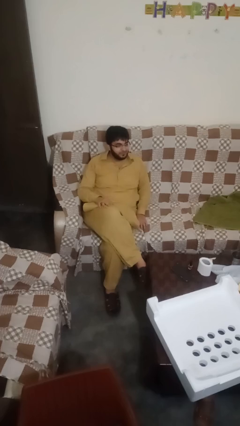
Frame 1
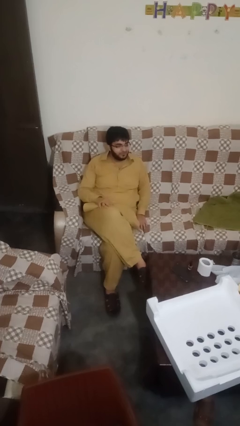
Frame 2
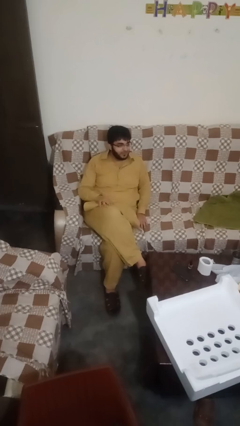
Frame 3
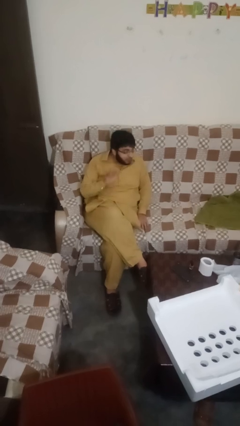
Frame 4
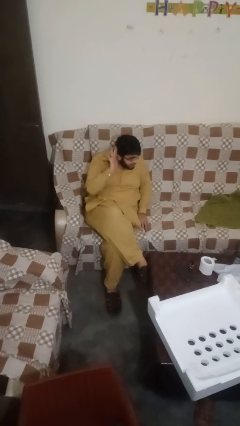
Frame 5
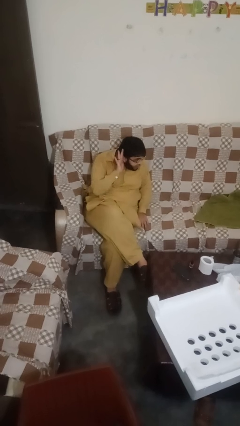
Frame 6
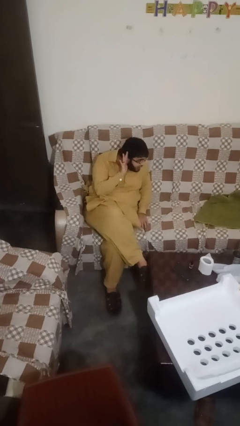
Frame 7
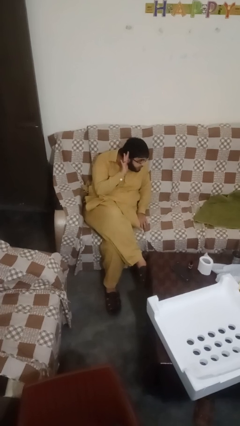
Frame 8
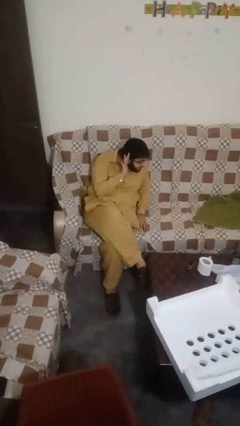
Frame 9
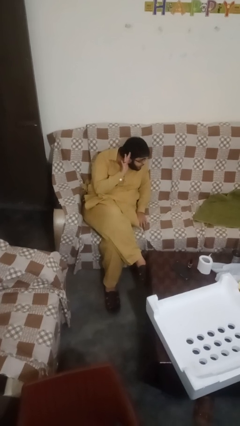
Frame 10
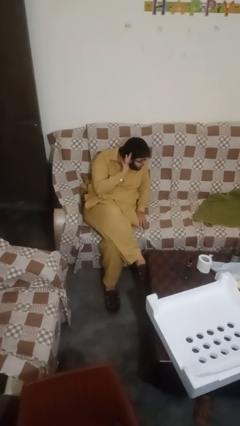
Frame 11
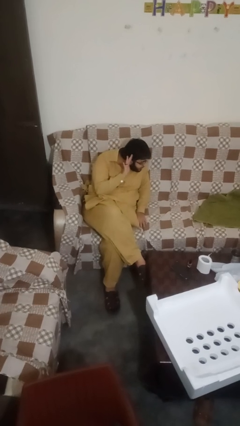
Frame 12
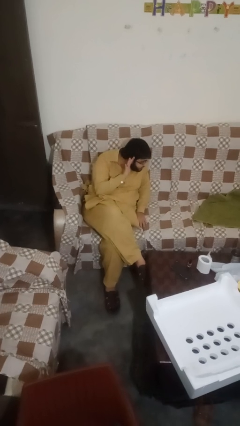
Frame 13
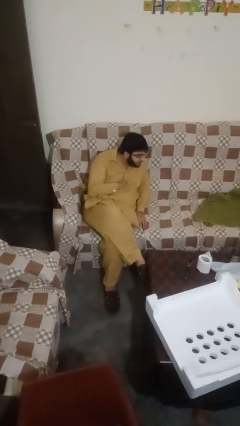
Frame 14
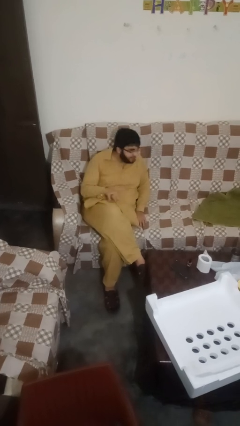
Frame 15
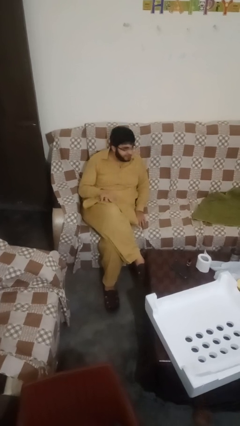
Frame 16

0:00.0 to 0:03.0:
person gestures listen closely

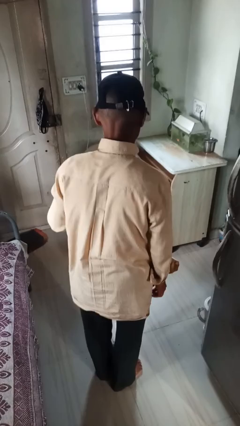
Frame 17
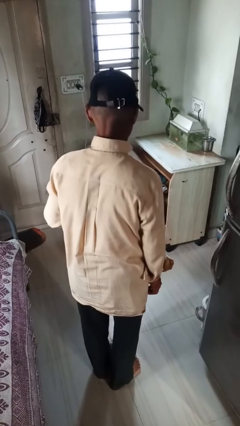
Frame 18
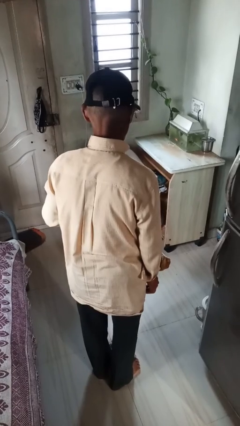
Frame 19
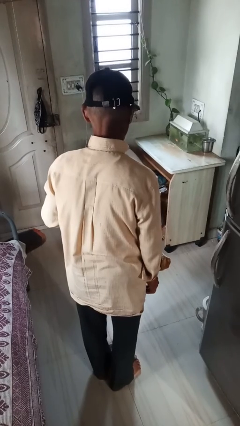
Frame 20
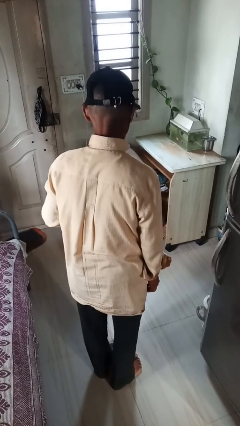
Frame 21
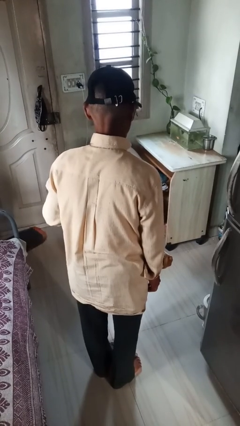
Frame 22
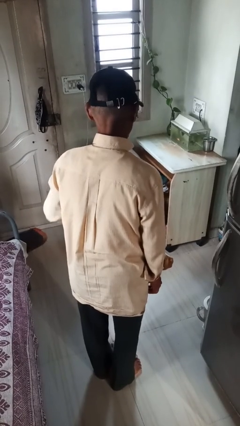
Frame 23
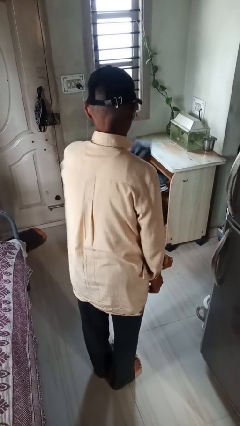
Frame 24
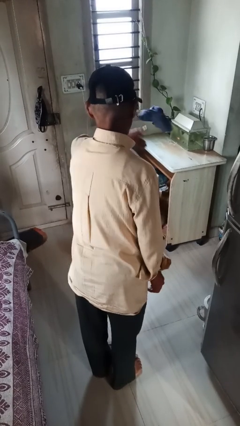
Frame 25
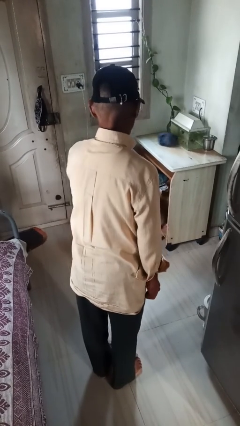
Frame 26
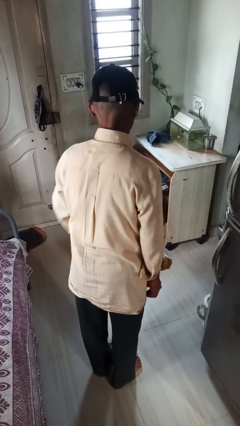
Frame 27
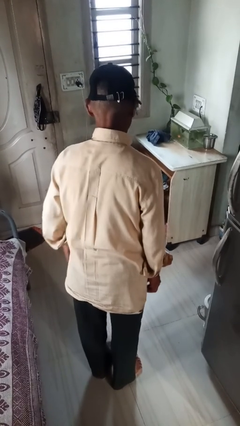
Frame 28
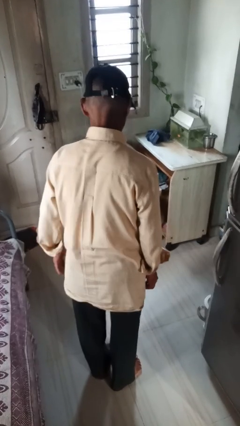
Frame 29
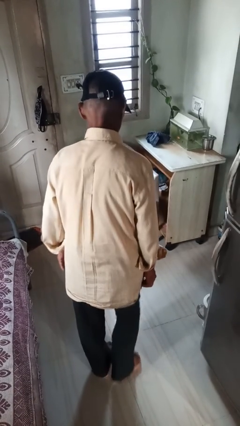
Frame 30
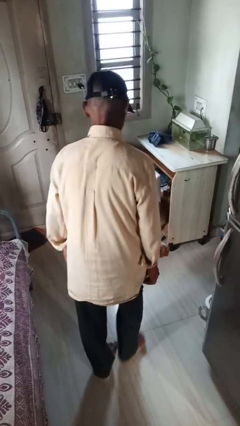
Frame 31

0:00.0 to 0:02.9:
person throws object on table

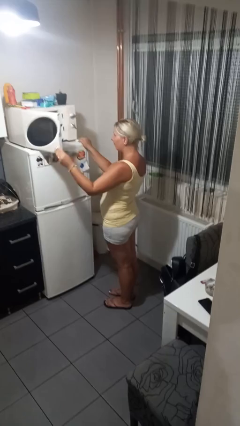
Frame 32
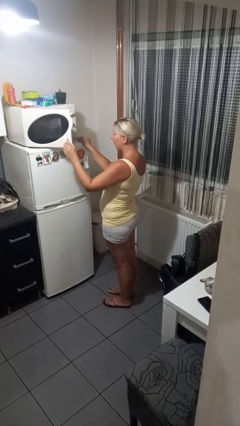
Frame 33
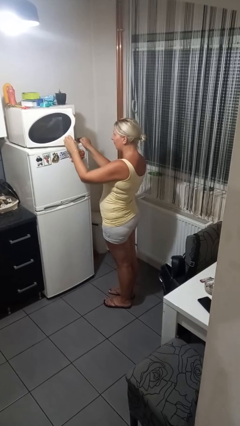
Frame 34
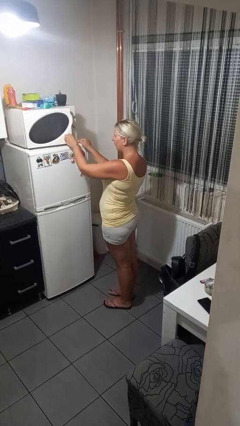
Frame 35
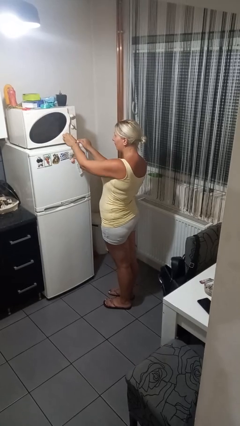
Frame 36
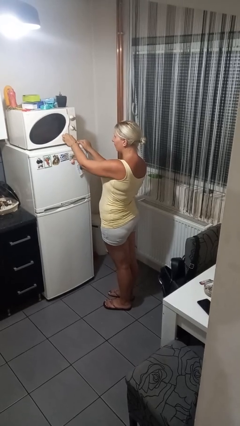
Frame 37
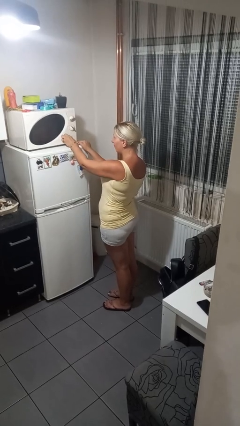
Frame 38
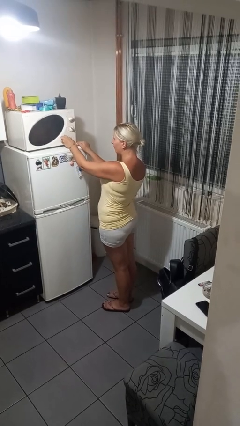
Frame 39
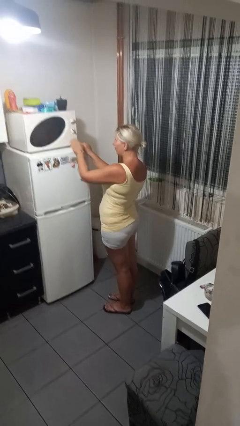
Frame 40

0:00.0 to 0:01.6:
person closes microwave

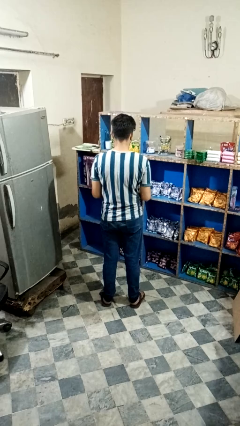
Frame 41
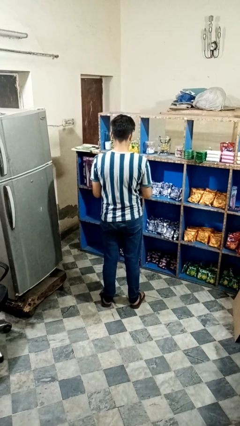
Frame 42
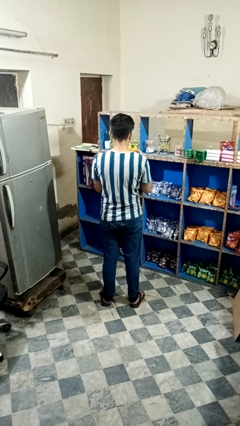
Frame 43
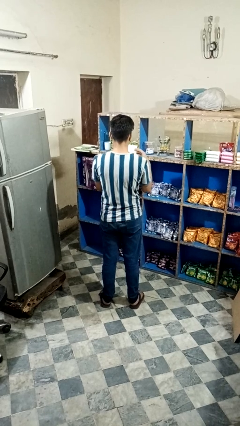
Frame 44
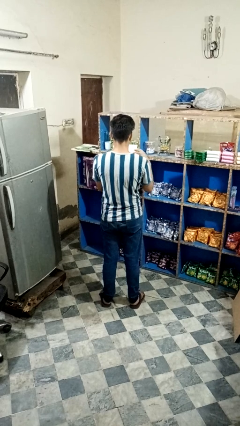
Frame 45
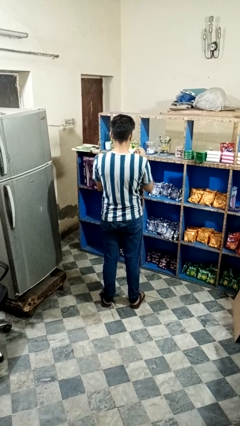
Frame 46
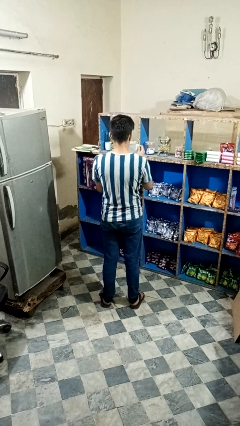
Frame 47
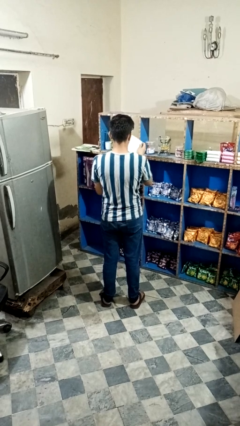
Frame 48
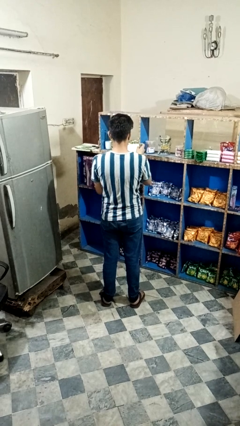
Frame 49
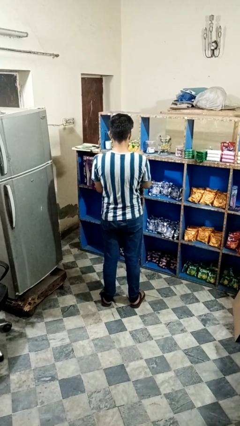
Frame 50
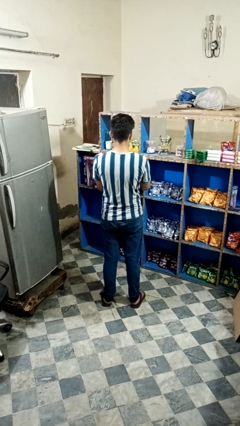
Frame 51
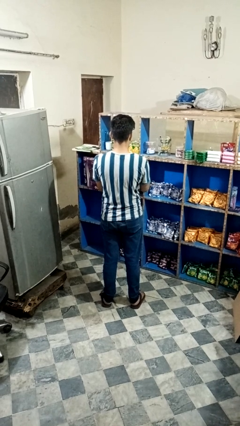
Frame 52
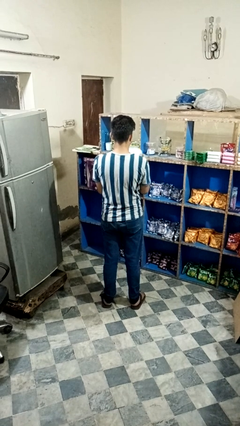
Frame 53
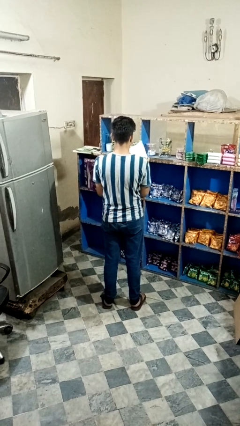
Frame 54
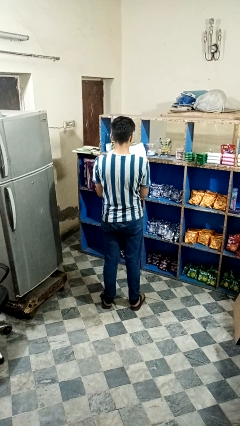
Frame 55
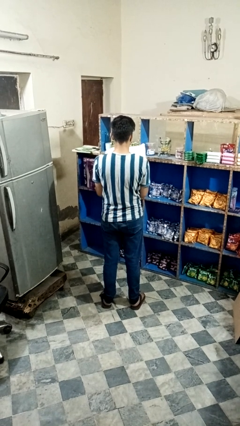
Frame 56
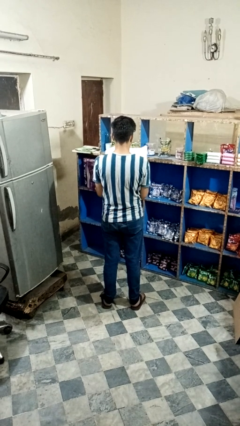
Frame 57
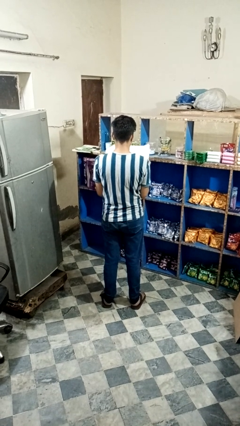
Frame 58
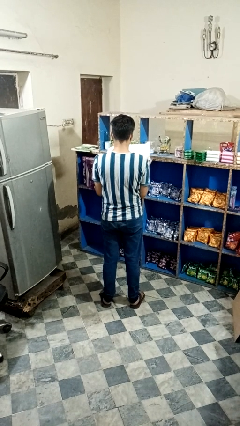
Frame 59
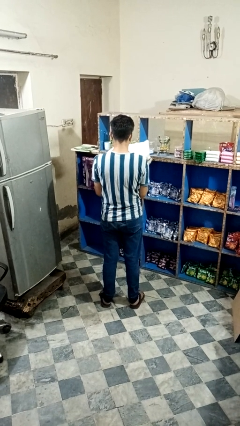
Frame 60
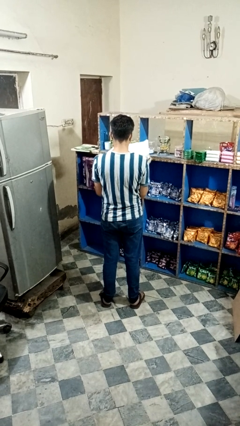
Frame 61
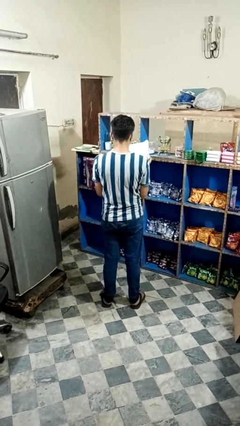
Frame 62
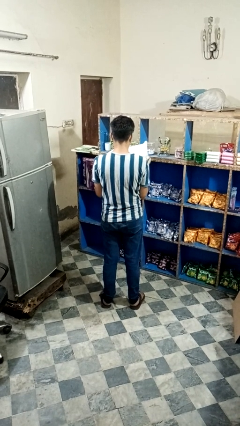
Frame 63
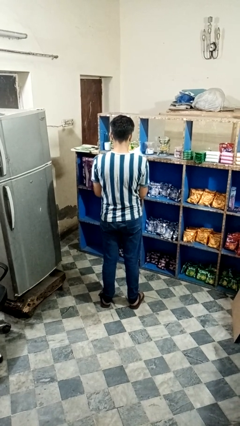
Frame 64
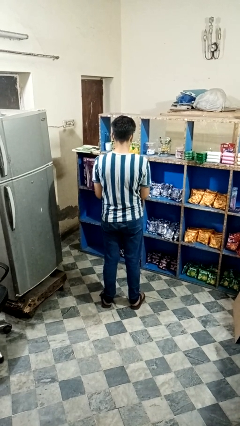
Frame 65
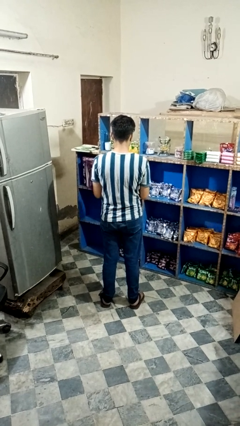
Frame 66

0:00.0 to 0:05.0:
person reads newspaper

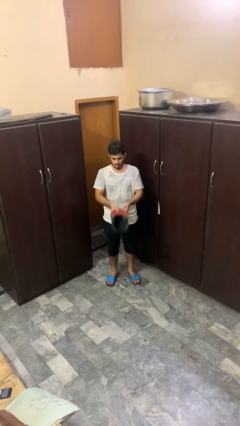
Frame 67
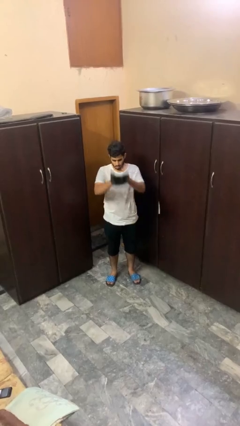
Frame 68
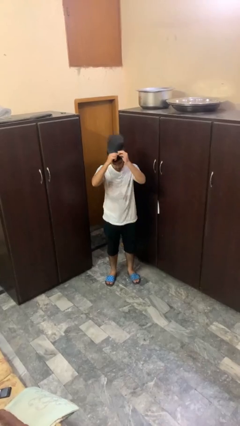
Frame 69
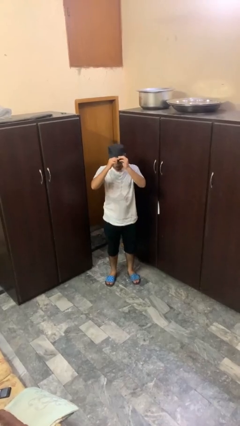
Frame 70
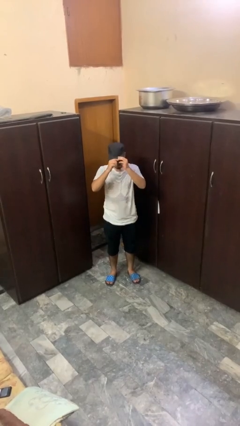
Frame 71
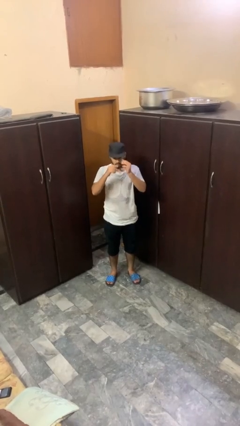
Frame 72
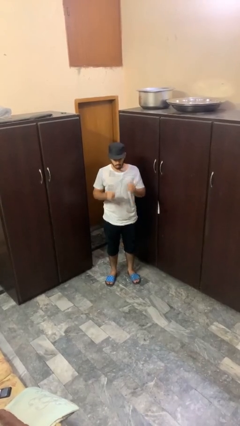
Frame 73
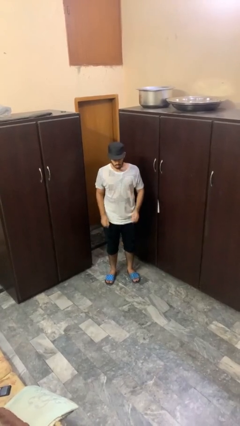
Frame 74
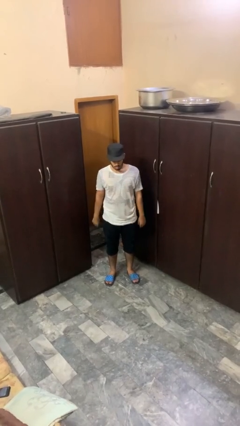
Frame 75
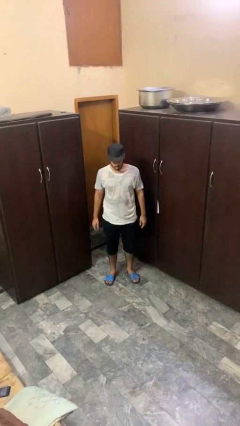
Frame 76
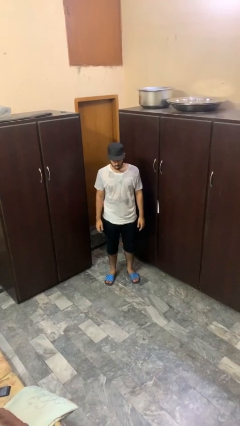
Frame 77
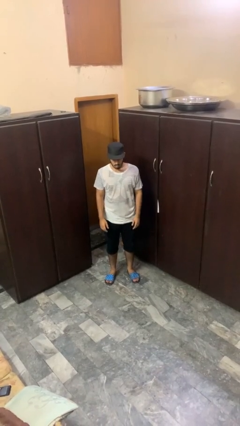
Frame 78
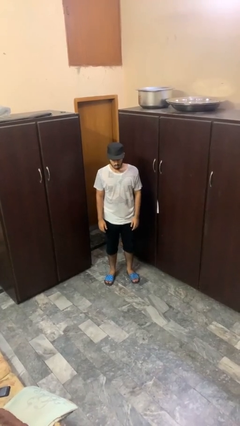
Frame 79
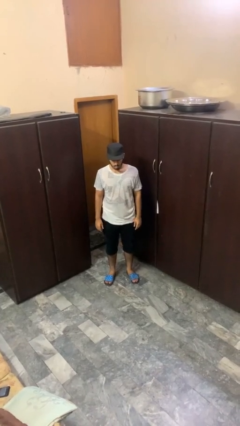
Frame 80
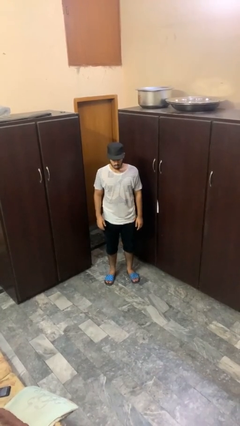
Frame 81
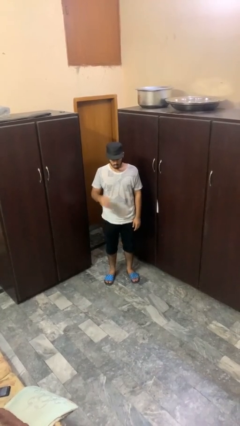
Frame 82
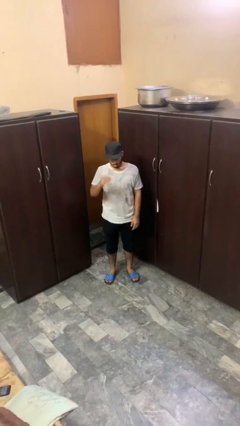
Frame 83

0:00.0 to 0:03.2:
person puts on hat

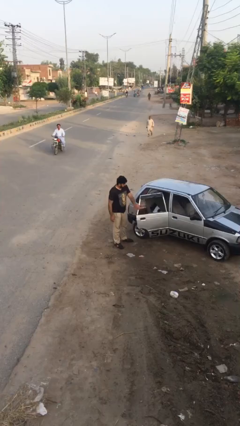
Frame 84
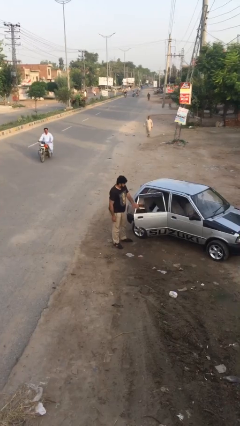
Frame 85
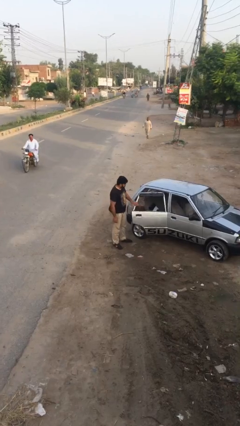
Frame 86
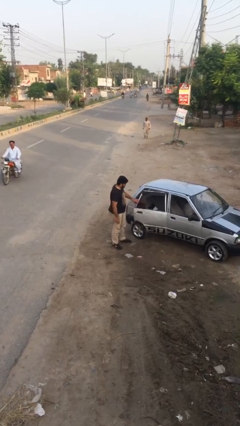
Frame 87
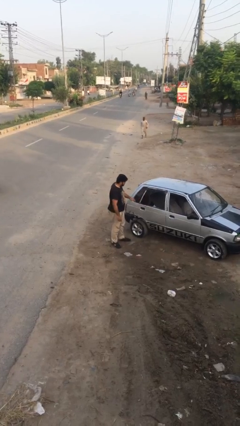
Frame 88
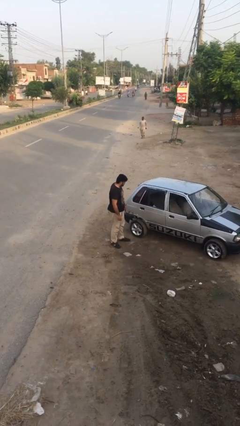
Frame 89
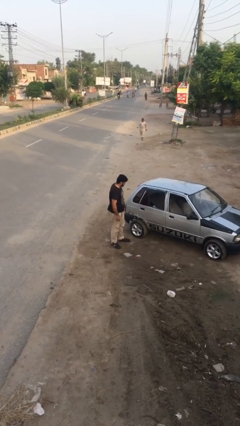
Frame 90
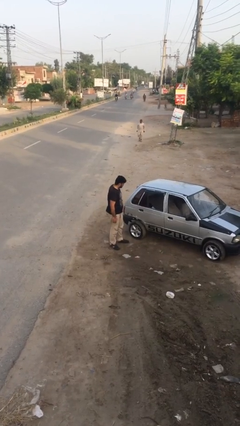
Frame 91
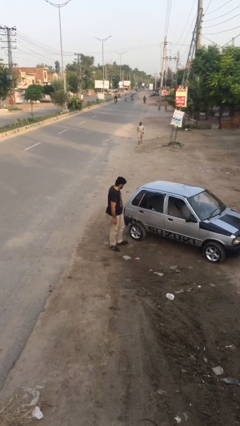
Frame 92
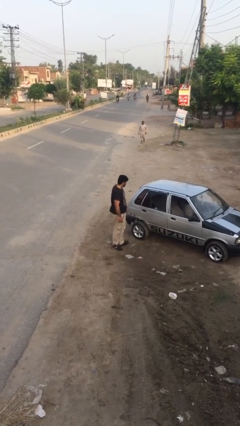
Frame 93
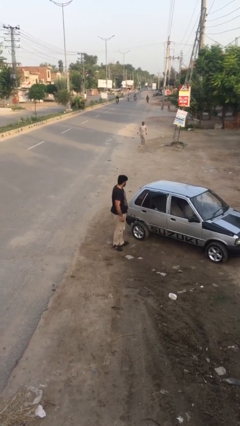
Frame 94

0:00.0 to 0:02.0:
person closes car door
